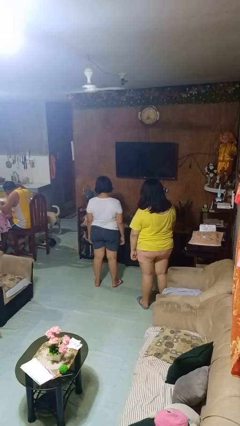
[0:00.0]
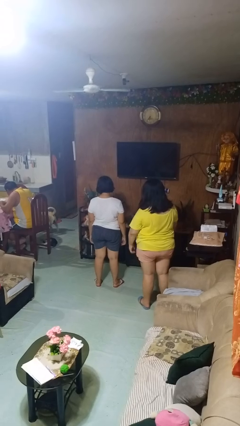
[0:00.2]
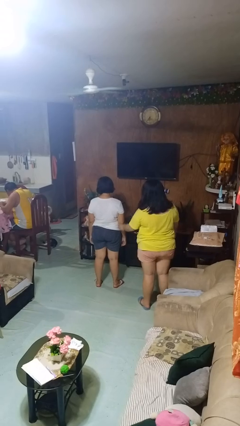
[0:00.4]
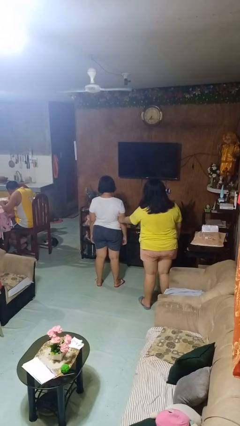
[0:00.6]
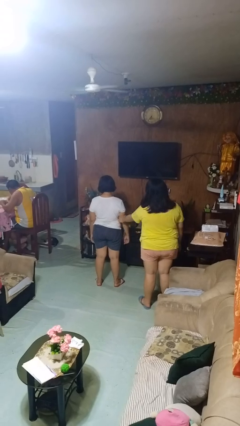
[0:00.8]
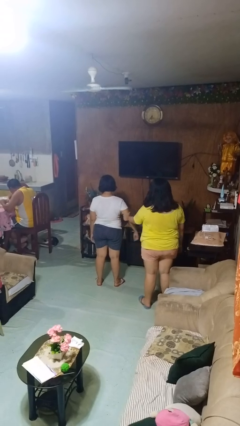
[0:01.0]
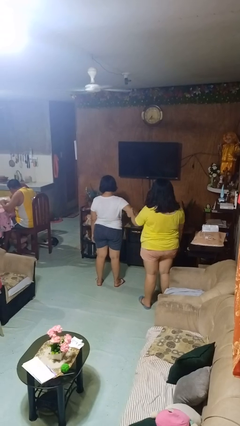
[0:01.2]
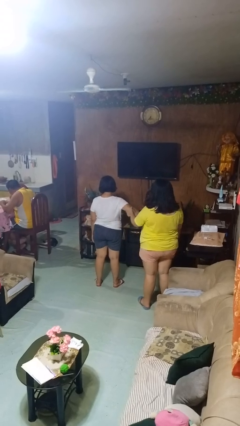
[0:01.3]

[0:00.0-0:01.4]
person grabs person by bicep

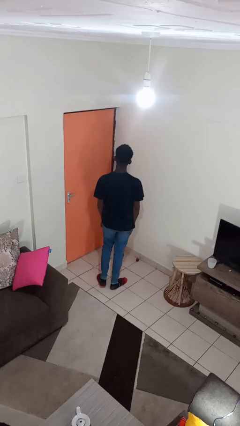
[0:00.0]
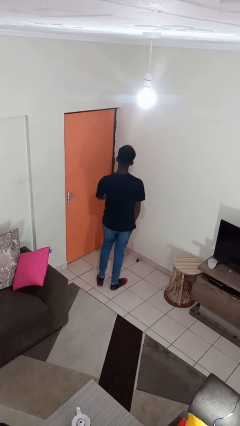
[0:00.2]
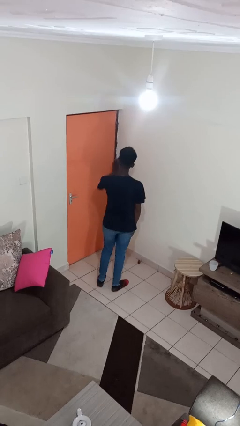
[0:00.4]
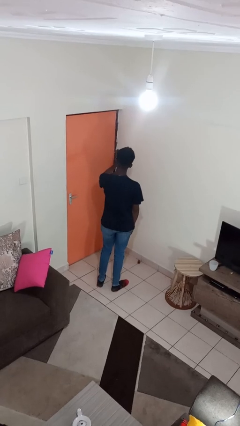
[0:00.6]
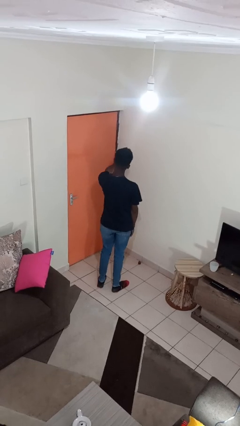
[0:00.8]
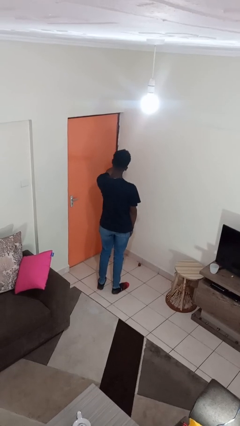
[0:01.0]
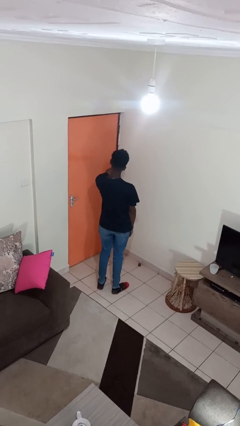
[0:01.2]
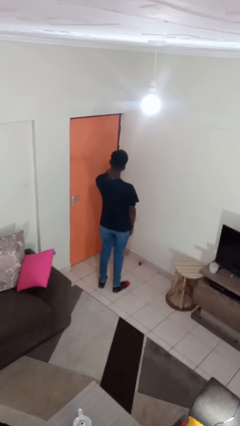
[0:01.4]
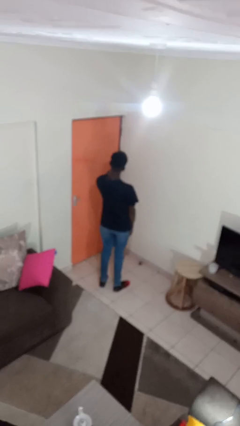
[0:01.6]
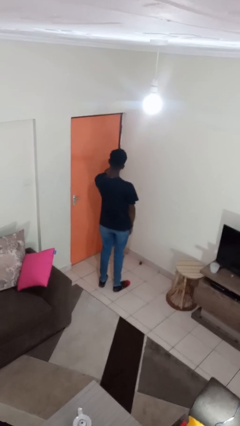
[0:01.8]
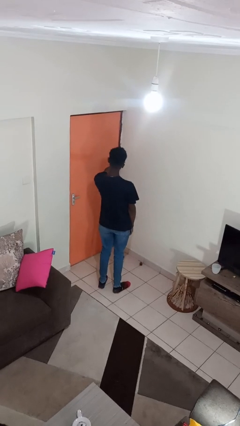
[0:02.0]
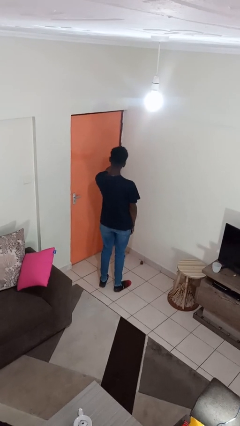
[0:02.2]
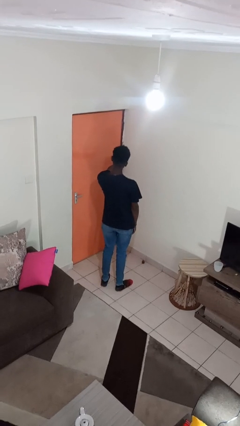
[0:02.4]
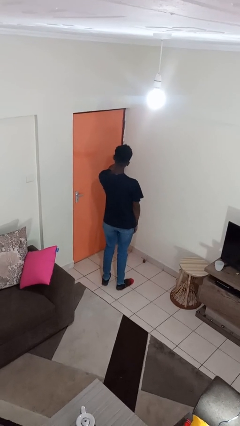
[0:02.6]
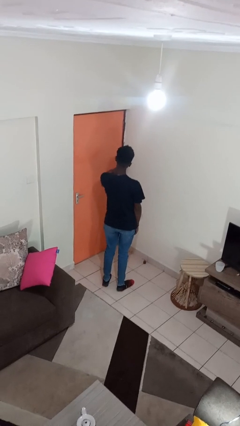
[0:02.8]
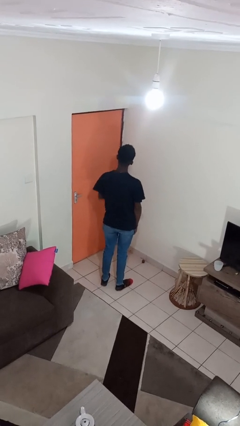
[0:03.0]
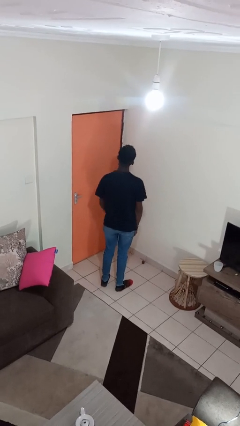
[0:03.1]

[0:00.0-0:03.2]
person gestures stop

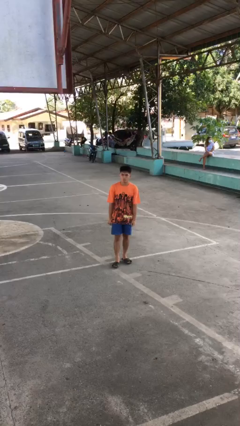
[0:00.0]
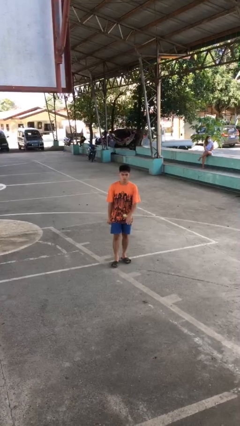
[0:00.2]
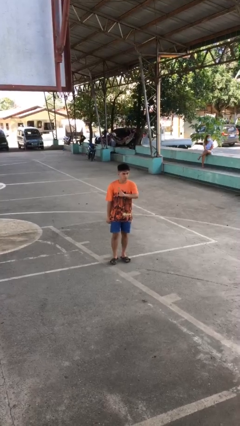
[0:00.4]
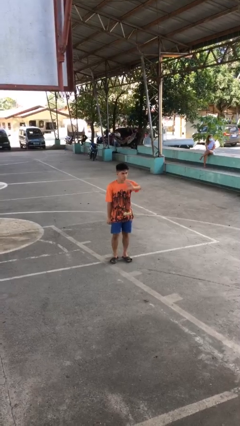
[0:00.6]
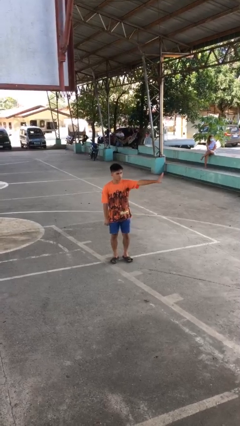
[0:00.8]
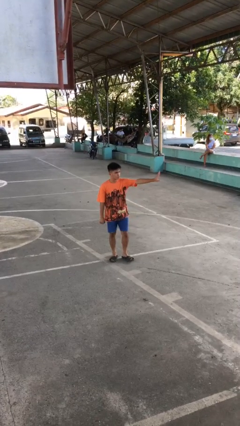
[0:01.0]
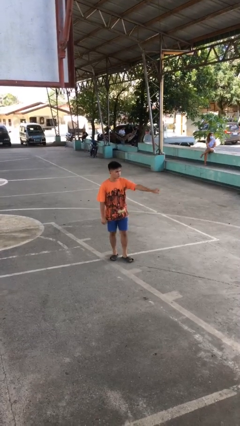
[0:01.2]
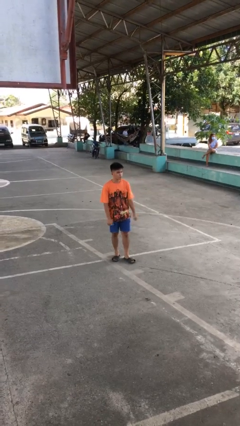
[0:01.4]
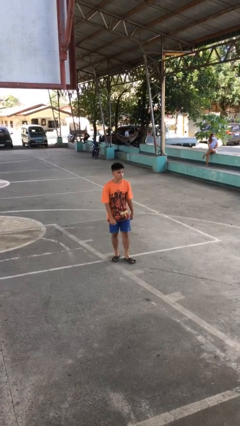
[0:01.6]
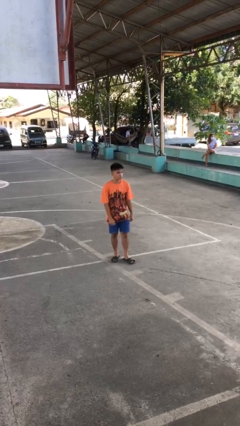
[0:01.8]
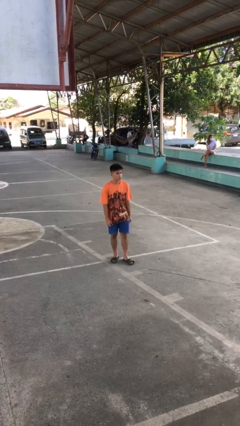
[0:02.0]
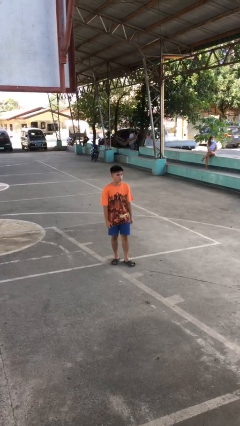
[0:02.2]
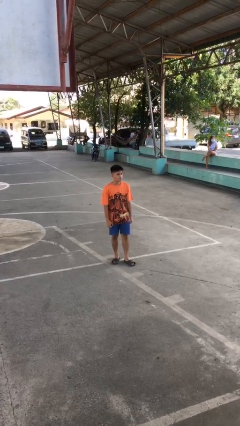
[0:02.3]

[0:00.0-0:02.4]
person gestures swipe left

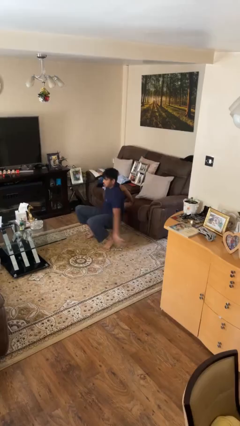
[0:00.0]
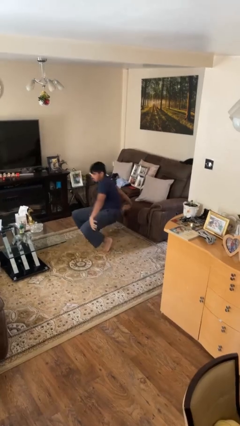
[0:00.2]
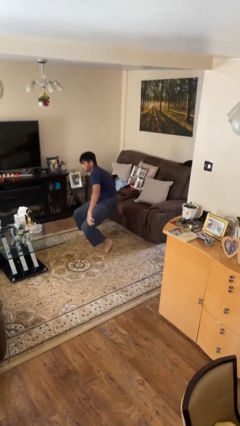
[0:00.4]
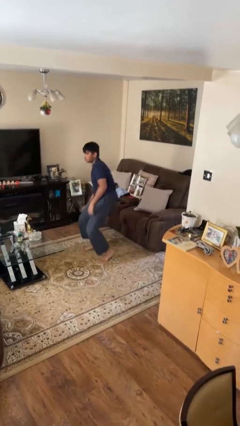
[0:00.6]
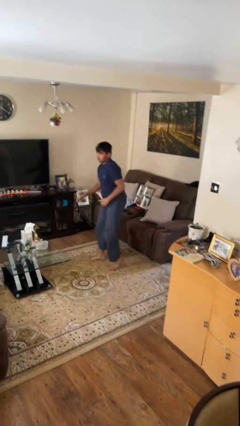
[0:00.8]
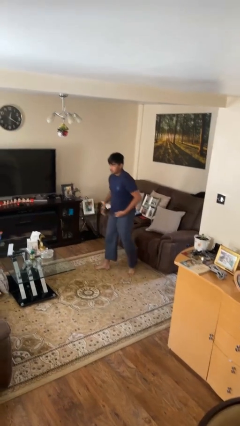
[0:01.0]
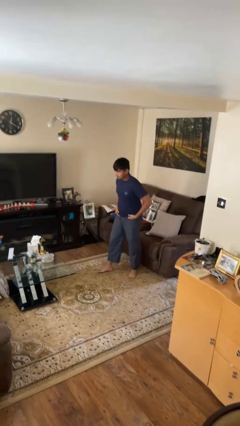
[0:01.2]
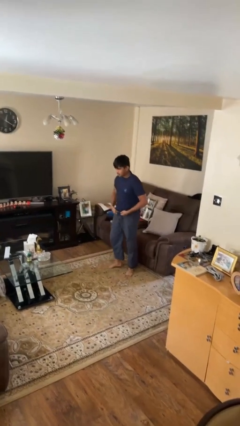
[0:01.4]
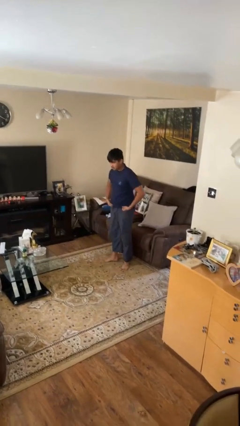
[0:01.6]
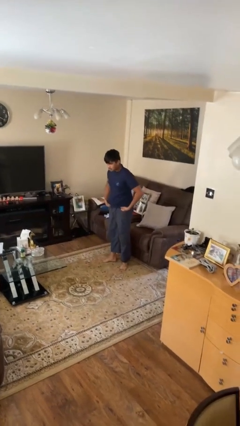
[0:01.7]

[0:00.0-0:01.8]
person stands up from floor

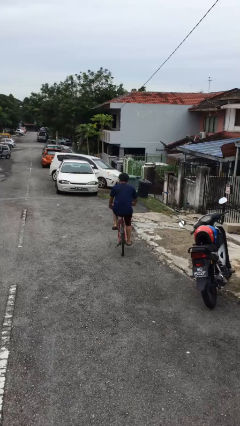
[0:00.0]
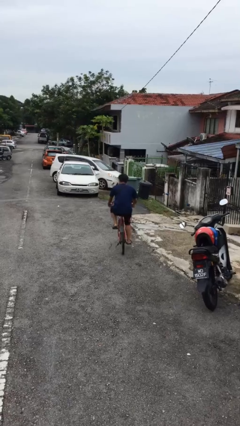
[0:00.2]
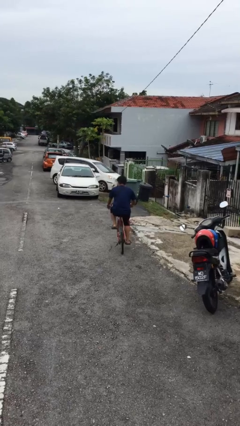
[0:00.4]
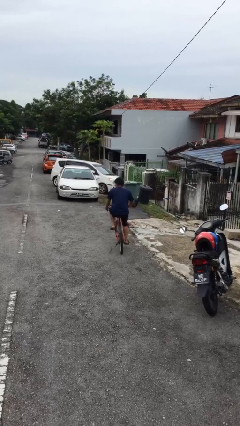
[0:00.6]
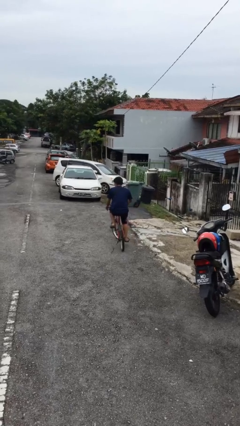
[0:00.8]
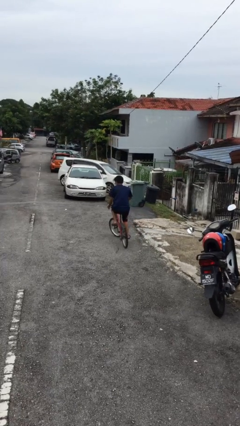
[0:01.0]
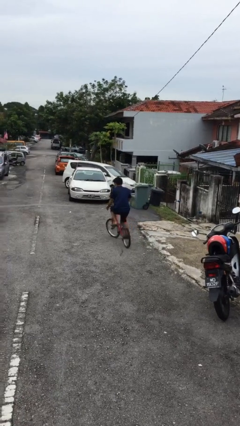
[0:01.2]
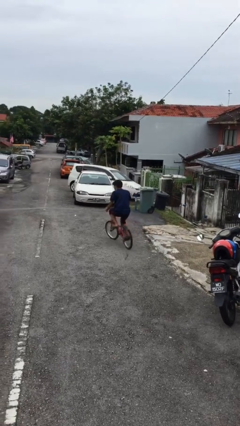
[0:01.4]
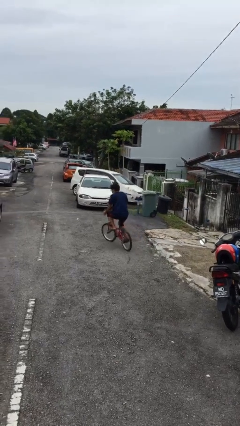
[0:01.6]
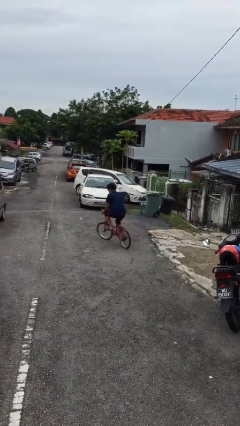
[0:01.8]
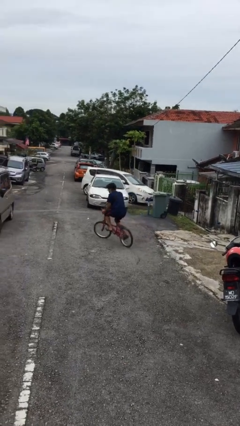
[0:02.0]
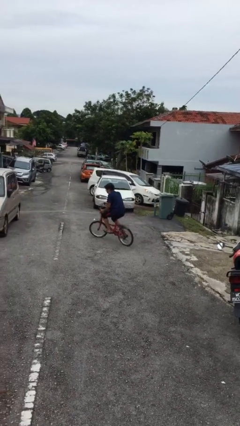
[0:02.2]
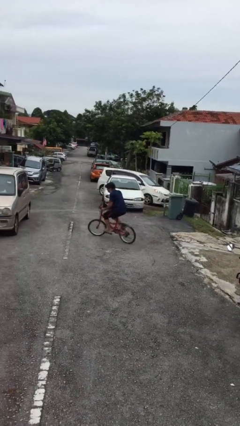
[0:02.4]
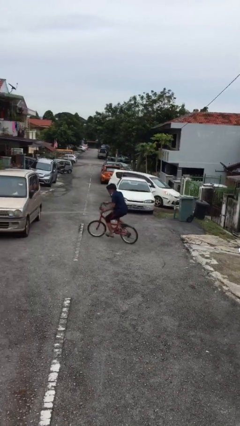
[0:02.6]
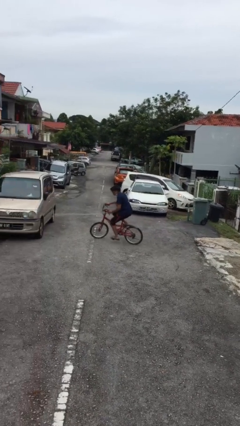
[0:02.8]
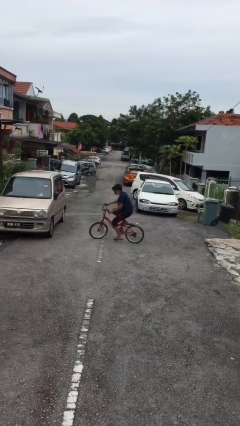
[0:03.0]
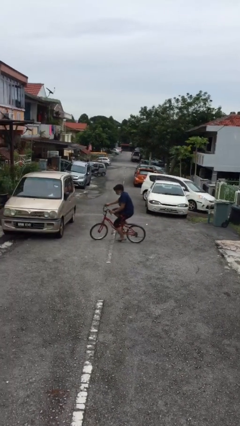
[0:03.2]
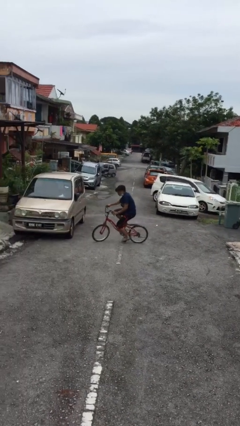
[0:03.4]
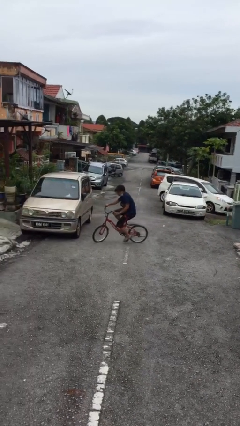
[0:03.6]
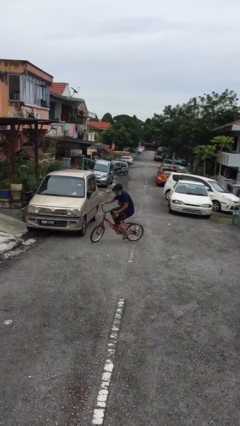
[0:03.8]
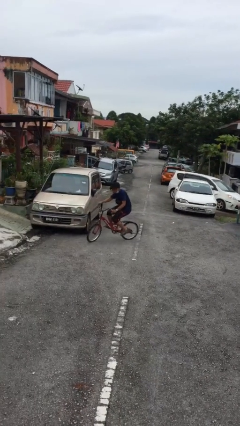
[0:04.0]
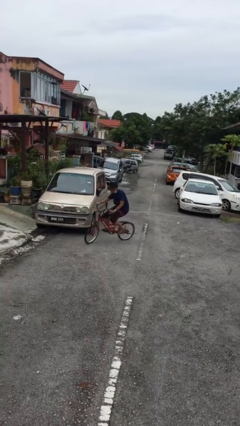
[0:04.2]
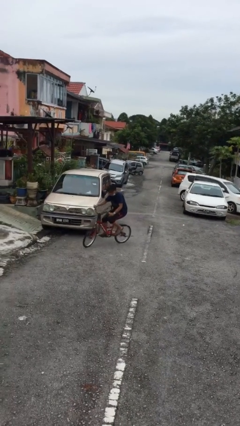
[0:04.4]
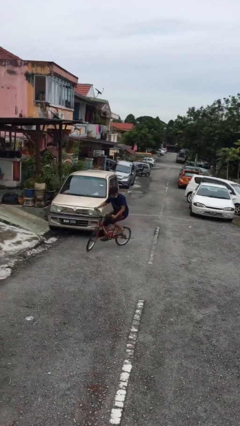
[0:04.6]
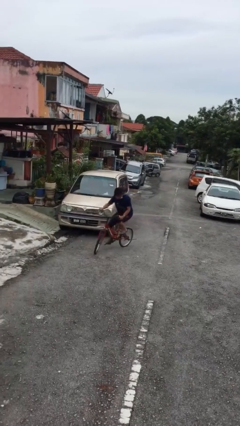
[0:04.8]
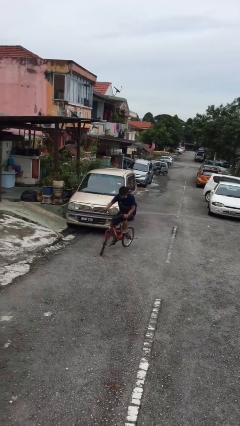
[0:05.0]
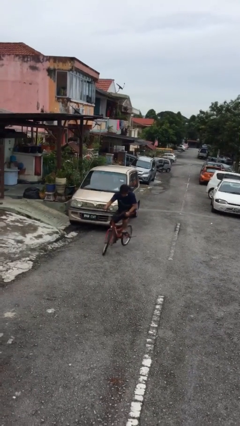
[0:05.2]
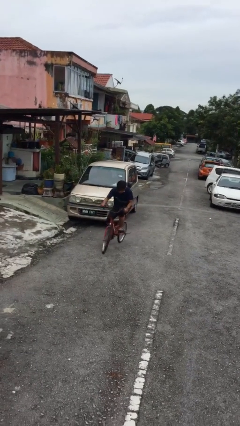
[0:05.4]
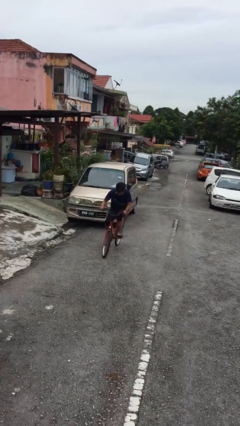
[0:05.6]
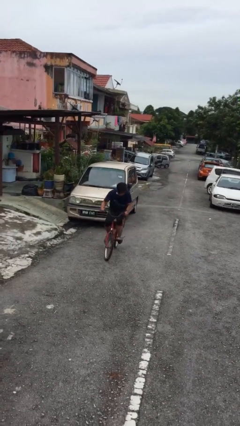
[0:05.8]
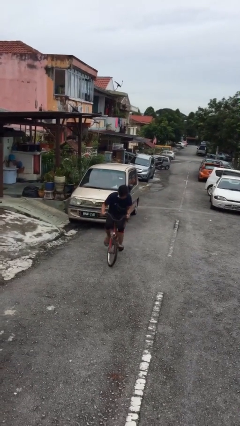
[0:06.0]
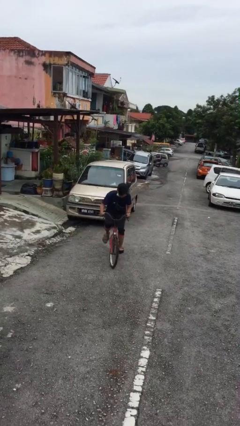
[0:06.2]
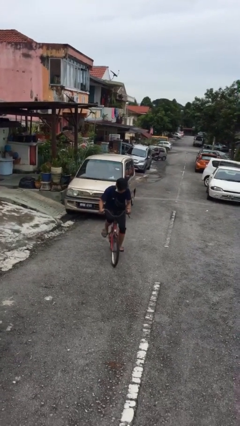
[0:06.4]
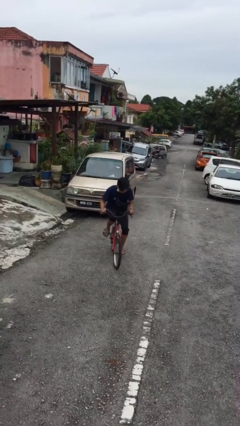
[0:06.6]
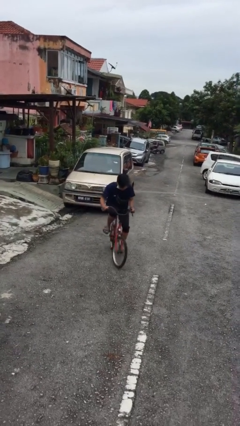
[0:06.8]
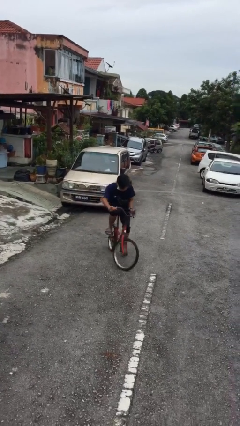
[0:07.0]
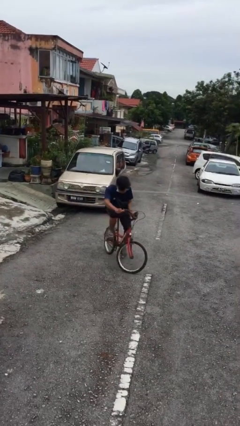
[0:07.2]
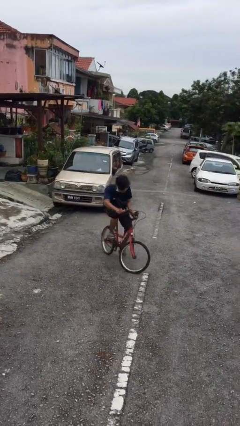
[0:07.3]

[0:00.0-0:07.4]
person rides bicycle

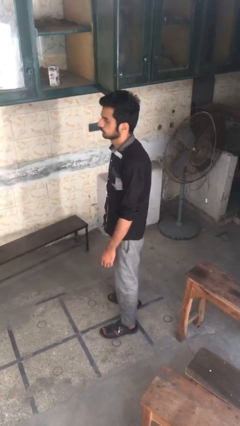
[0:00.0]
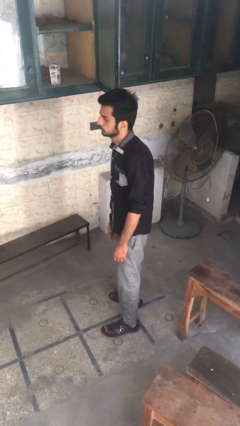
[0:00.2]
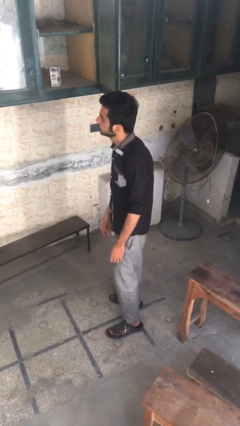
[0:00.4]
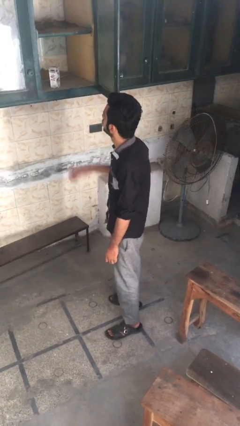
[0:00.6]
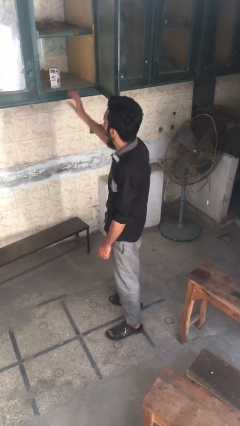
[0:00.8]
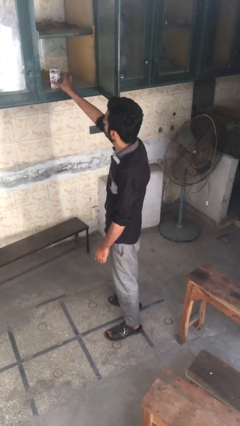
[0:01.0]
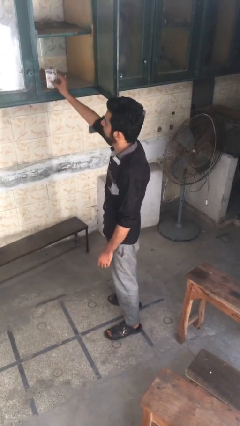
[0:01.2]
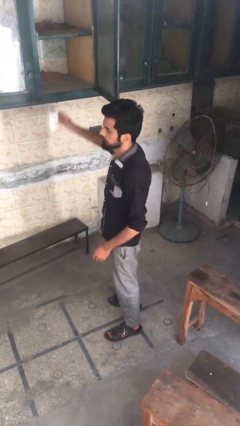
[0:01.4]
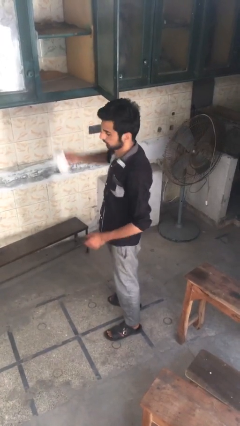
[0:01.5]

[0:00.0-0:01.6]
person takes object from cabinet
